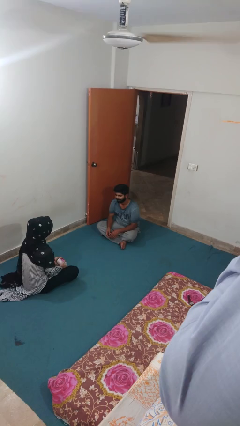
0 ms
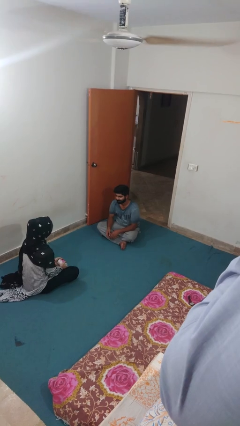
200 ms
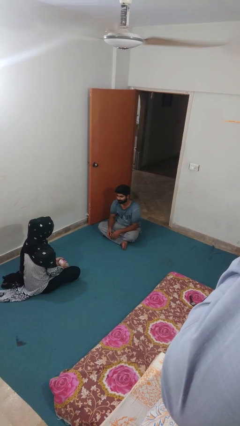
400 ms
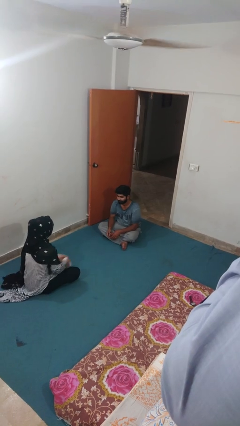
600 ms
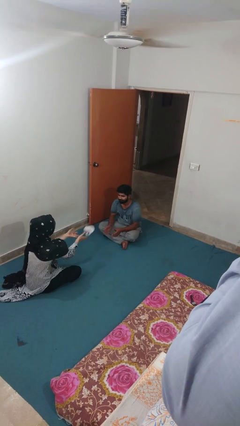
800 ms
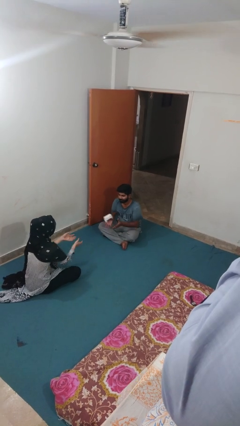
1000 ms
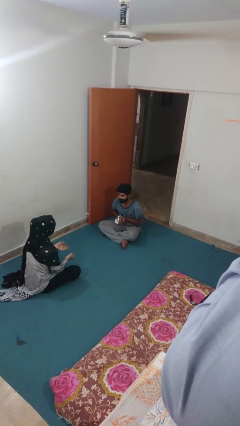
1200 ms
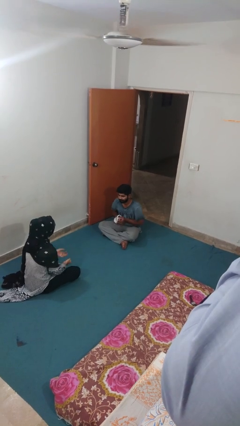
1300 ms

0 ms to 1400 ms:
person catches object from person

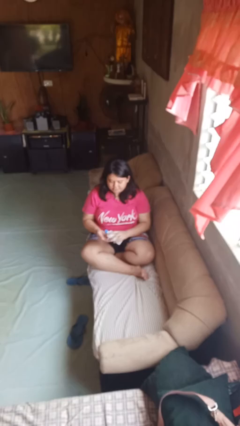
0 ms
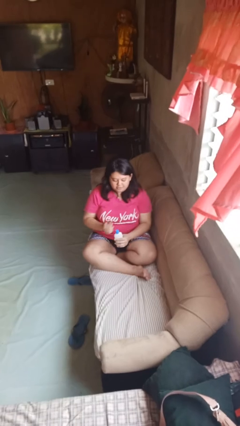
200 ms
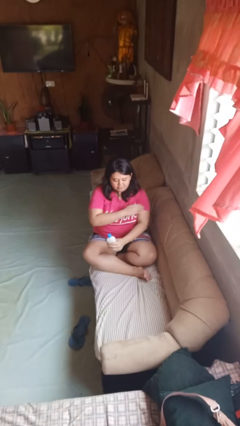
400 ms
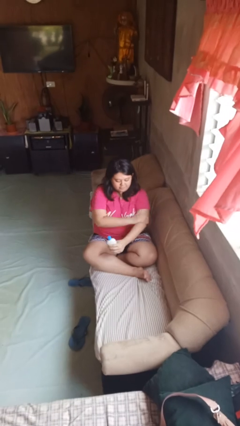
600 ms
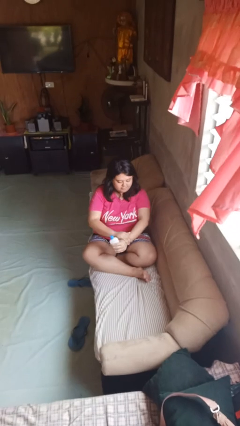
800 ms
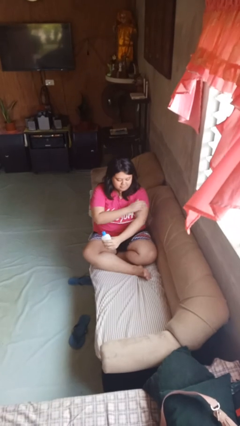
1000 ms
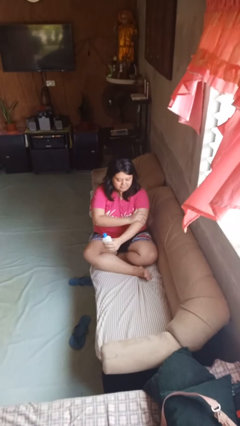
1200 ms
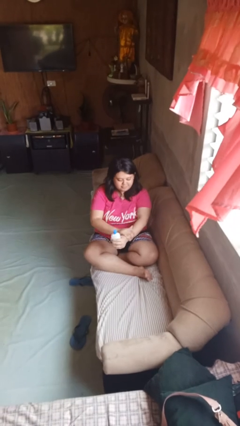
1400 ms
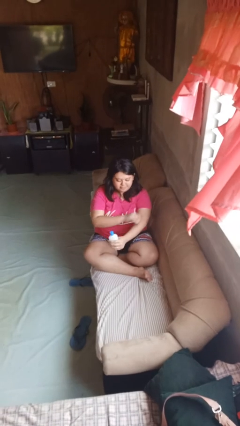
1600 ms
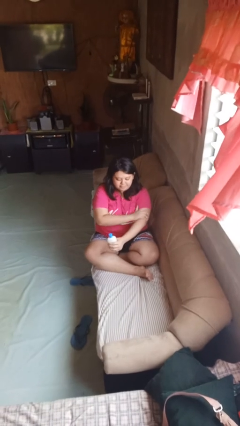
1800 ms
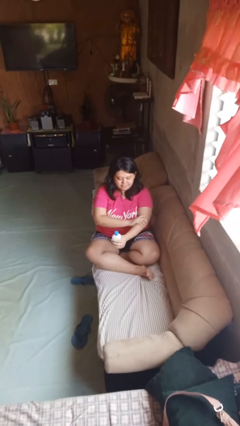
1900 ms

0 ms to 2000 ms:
person applies sunscreen

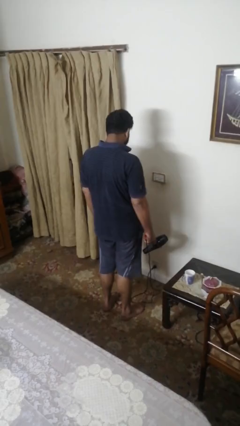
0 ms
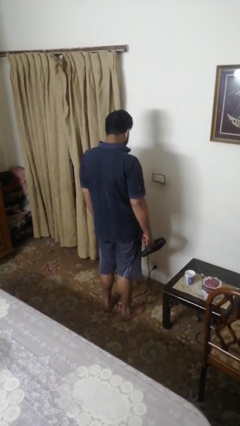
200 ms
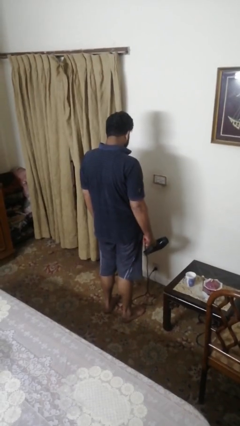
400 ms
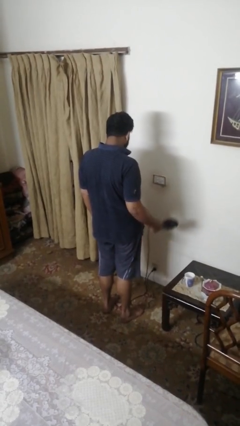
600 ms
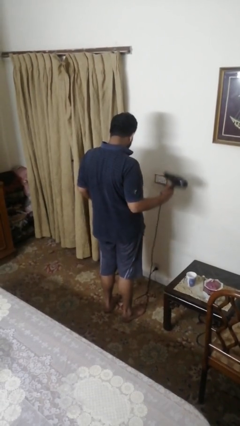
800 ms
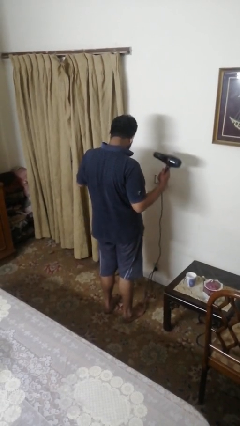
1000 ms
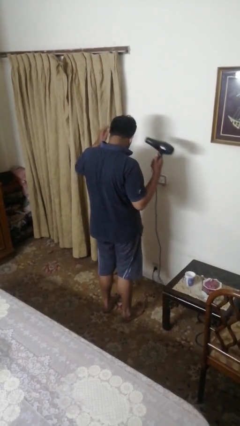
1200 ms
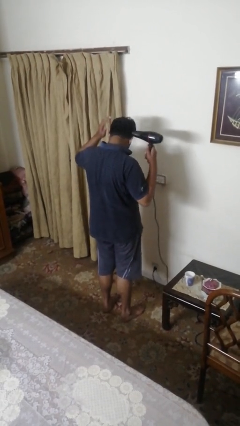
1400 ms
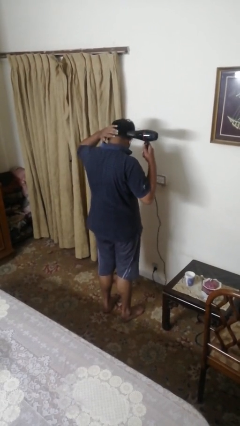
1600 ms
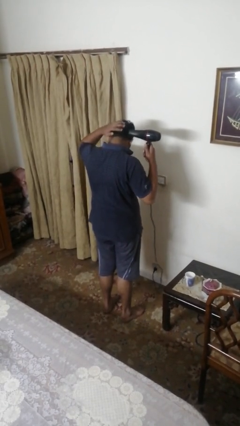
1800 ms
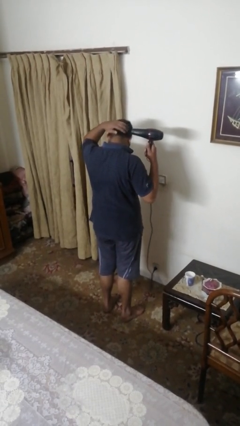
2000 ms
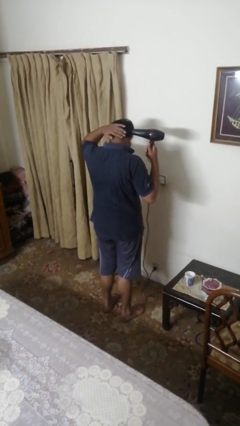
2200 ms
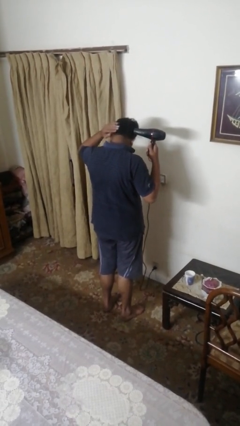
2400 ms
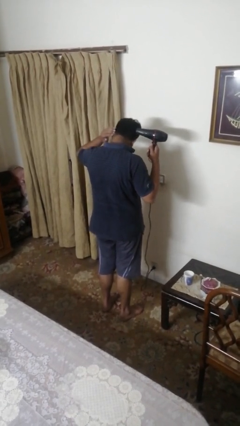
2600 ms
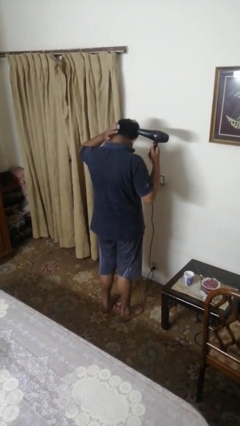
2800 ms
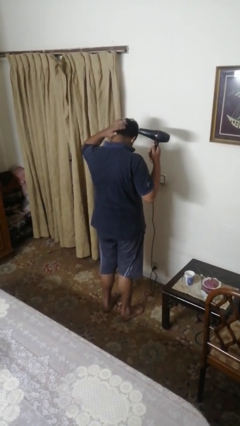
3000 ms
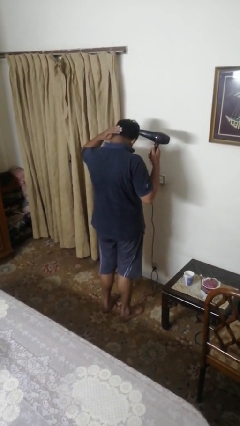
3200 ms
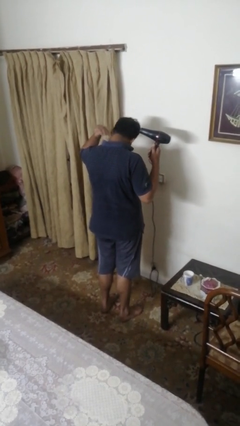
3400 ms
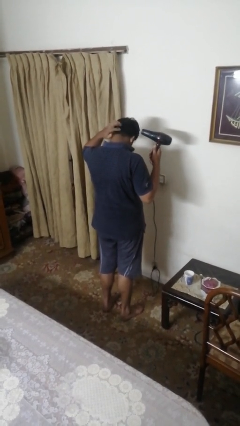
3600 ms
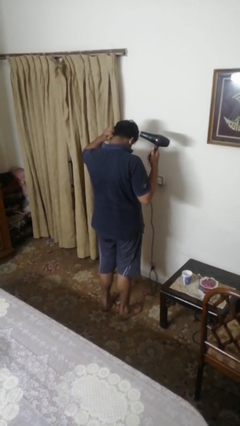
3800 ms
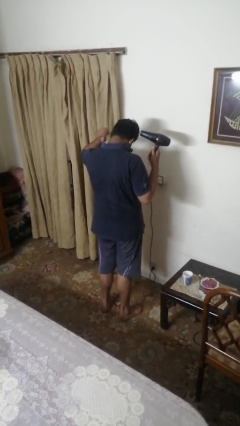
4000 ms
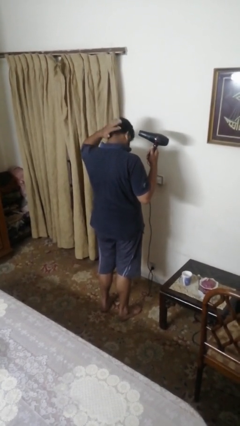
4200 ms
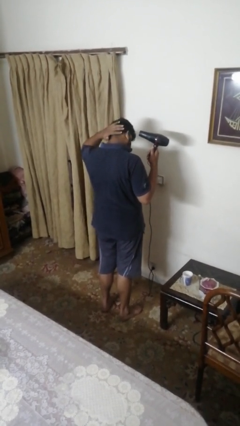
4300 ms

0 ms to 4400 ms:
person dries hair with hairdryer

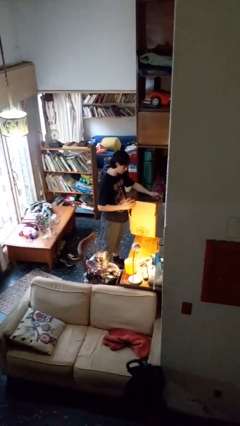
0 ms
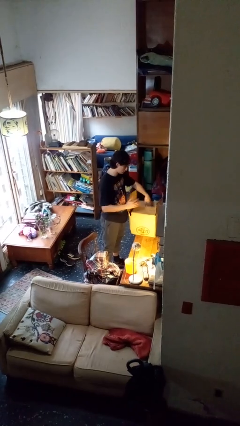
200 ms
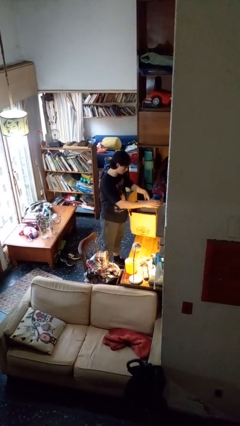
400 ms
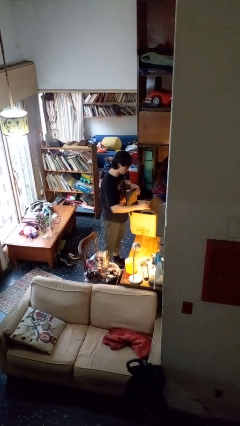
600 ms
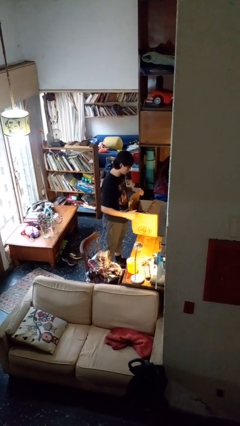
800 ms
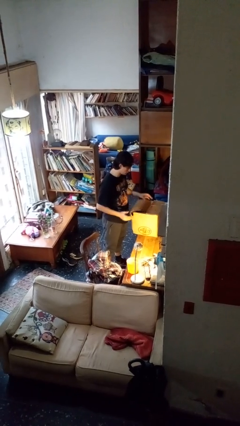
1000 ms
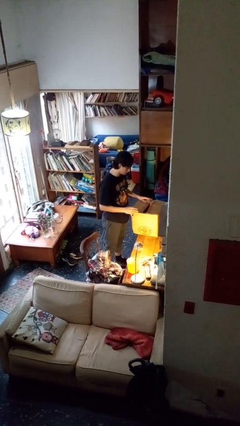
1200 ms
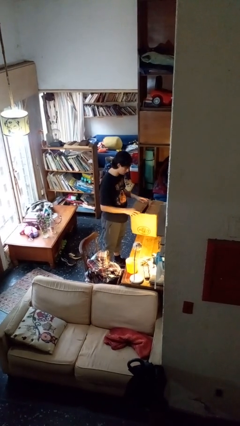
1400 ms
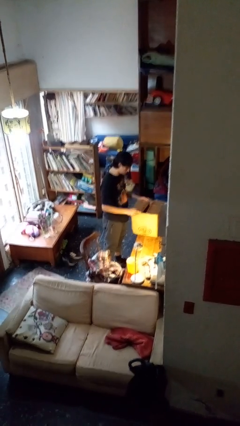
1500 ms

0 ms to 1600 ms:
person closes box

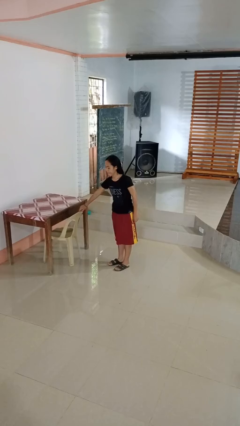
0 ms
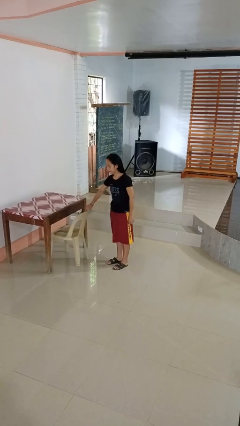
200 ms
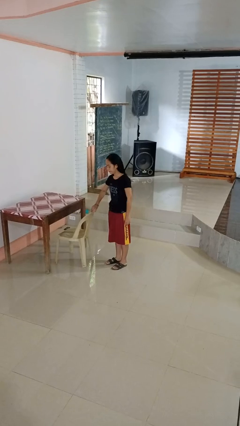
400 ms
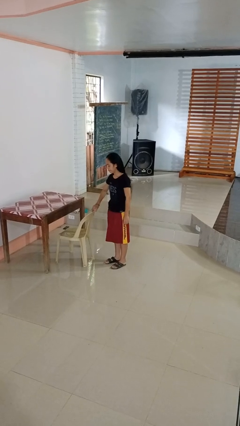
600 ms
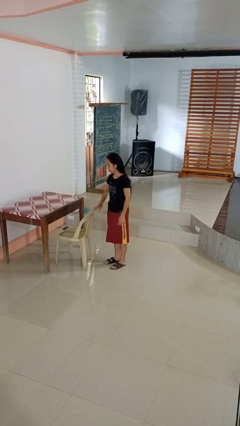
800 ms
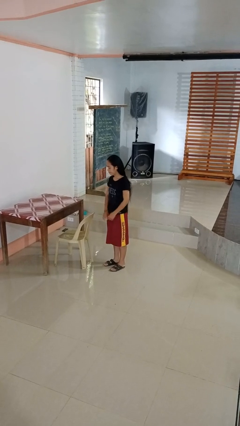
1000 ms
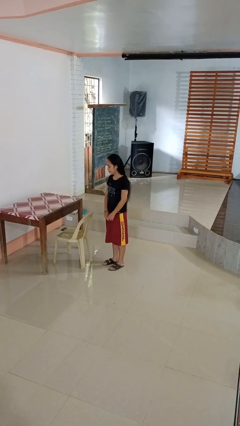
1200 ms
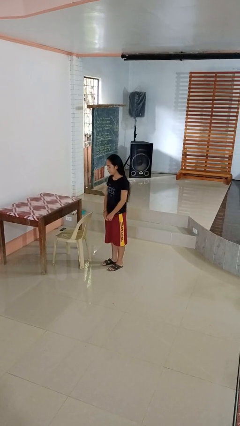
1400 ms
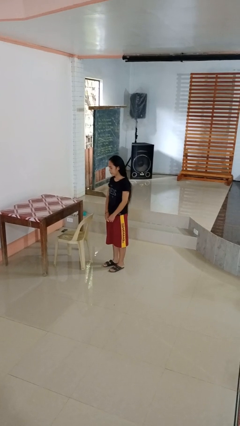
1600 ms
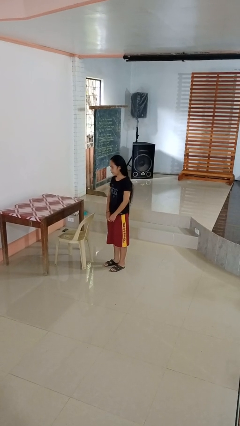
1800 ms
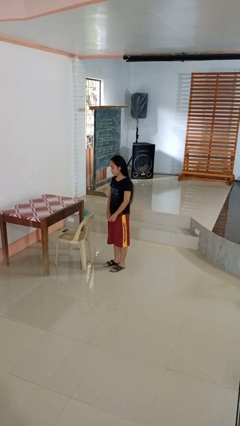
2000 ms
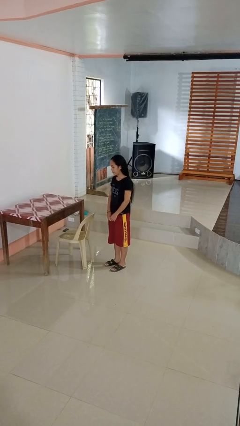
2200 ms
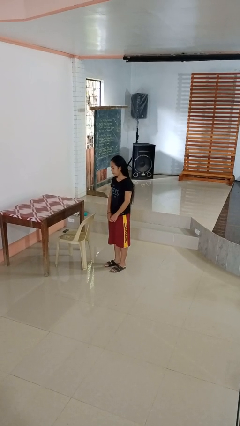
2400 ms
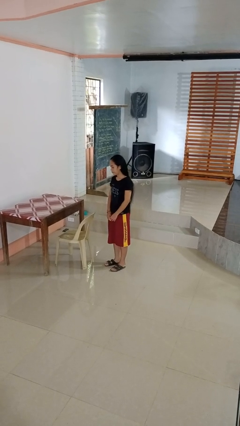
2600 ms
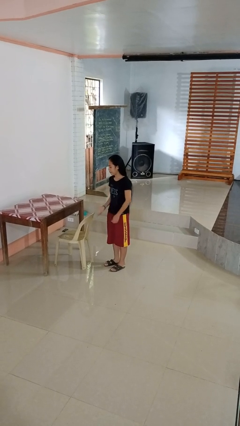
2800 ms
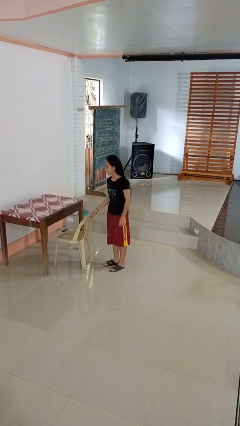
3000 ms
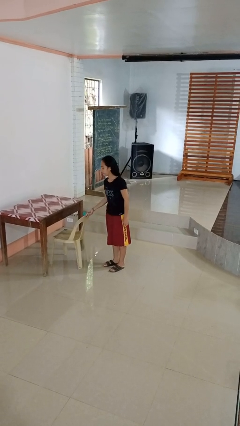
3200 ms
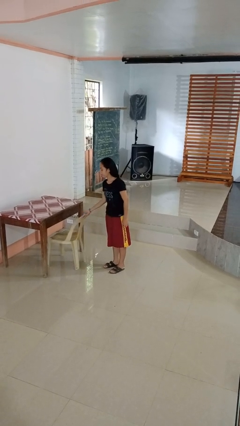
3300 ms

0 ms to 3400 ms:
person pulls out chair

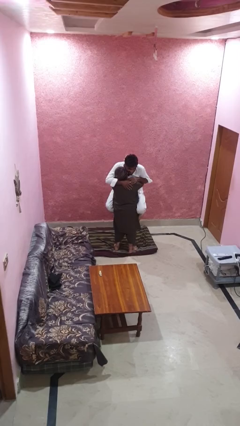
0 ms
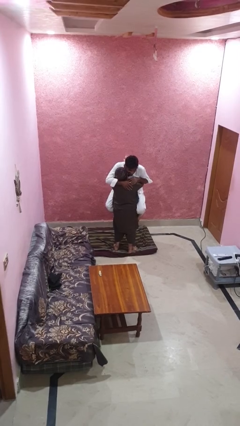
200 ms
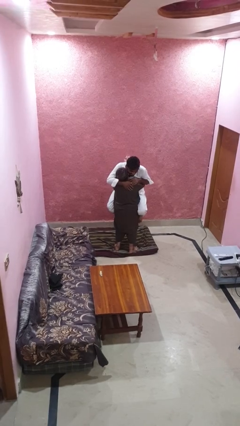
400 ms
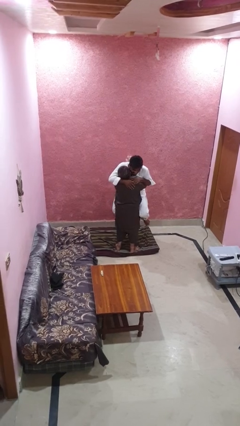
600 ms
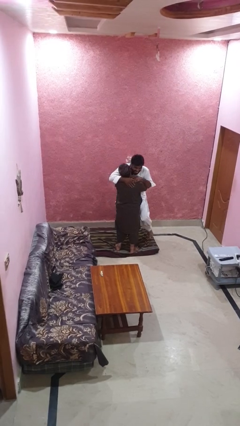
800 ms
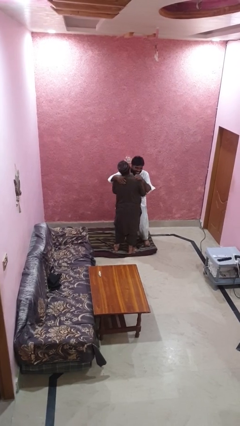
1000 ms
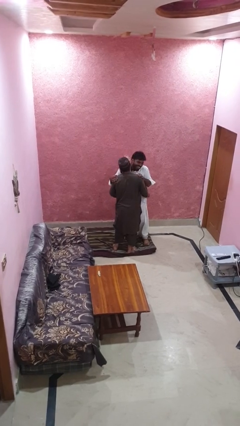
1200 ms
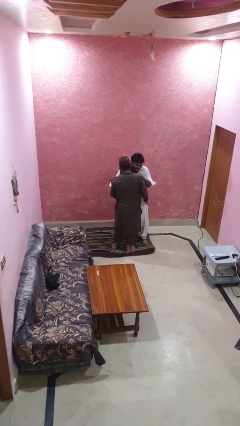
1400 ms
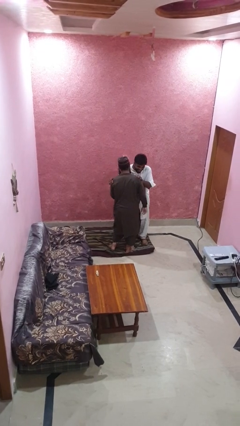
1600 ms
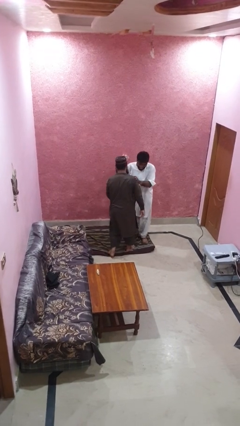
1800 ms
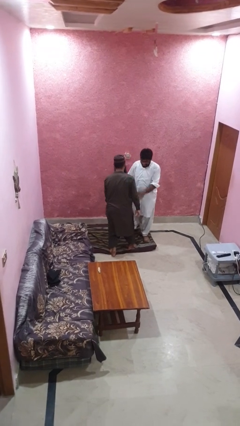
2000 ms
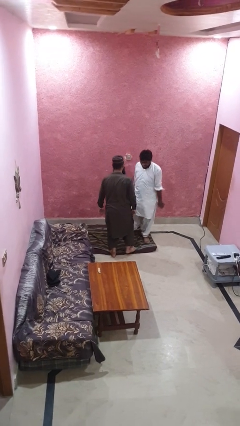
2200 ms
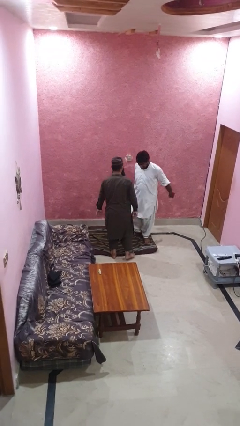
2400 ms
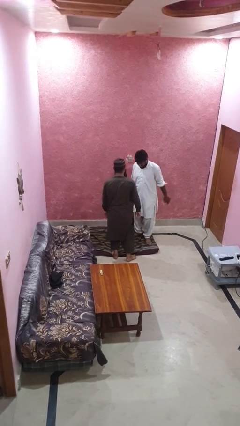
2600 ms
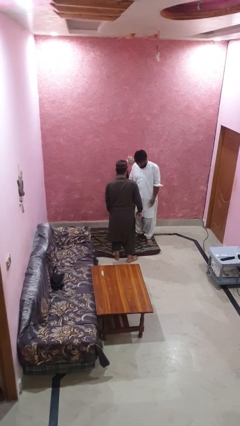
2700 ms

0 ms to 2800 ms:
person puts down person

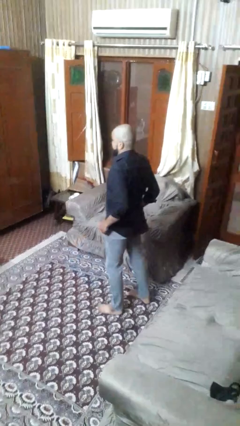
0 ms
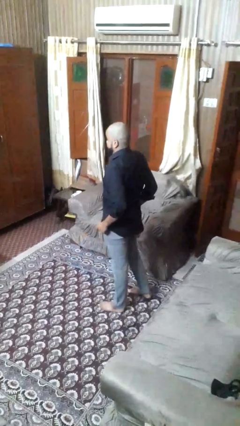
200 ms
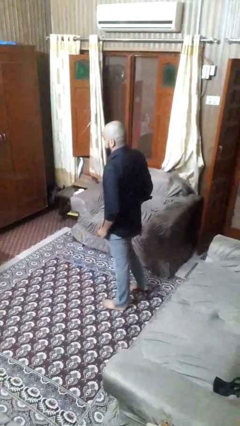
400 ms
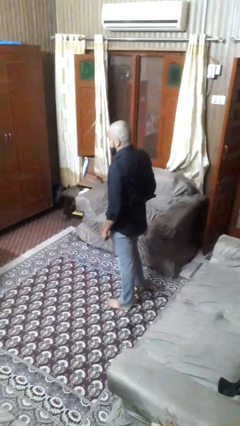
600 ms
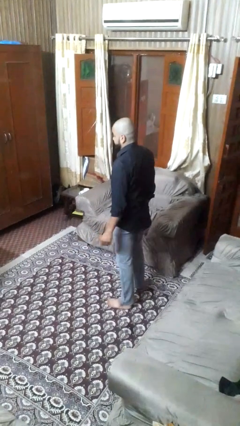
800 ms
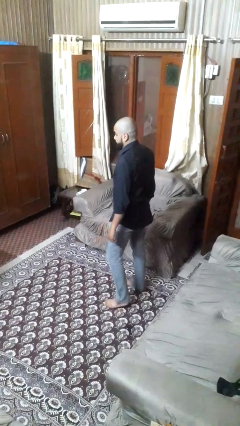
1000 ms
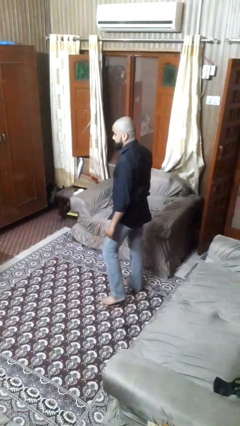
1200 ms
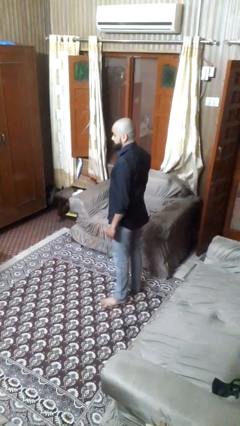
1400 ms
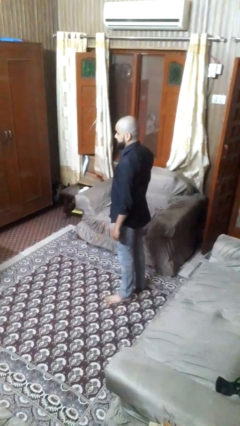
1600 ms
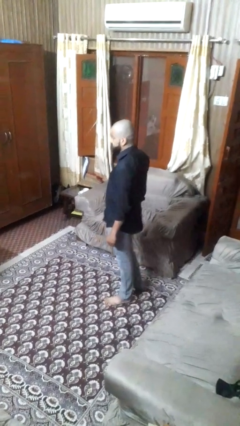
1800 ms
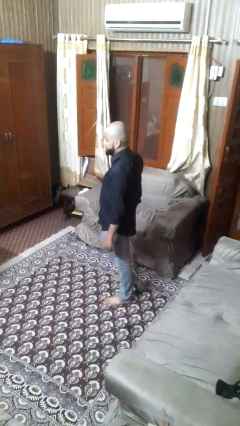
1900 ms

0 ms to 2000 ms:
person stands up from floor
